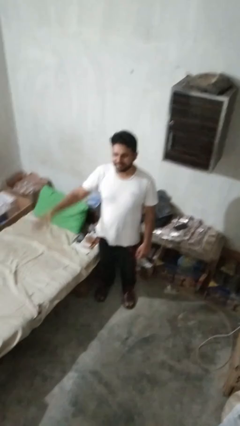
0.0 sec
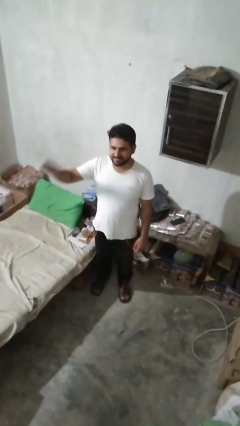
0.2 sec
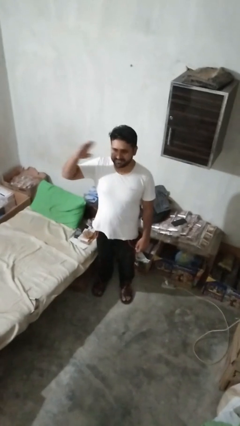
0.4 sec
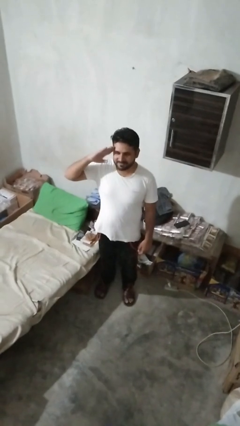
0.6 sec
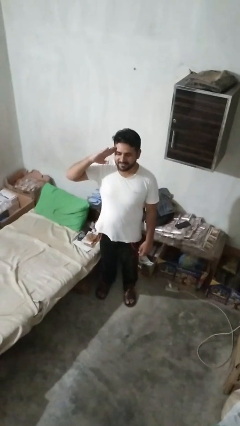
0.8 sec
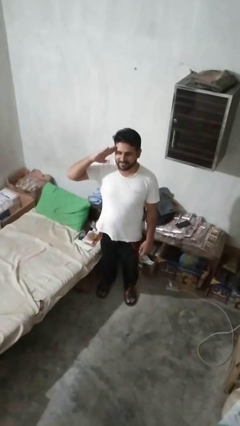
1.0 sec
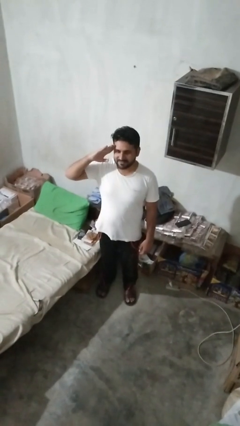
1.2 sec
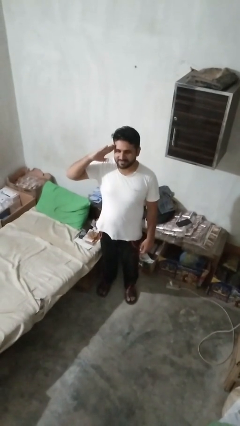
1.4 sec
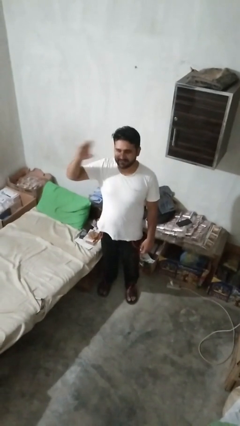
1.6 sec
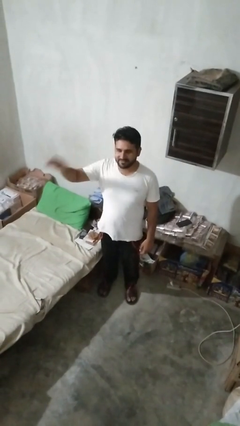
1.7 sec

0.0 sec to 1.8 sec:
person salutes

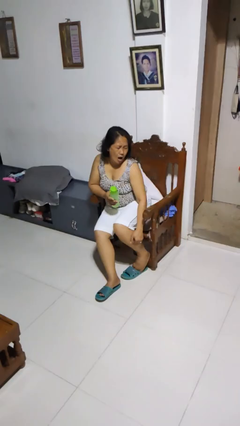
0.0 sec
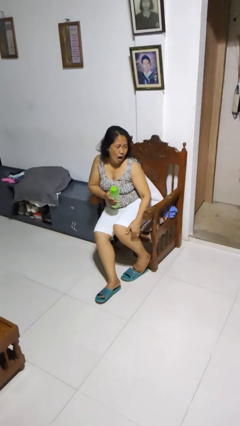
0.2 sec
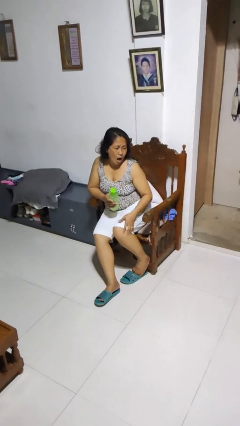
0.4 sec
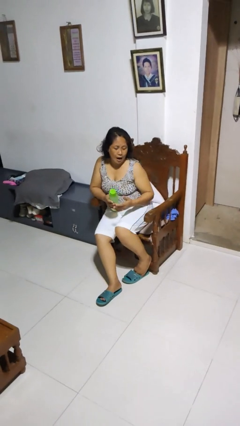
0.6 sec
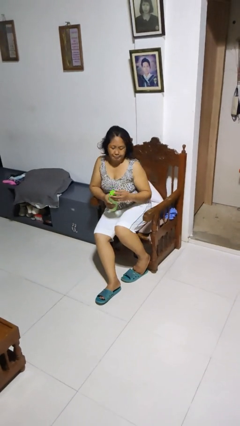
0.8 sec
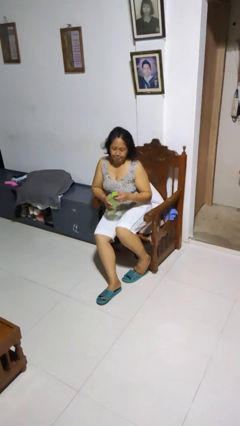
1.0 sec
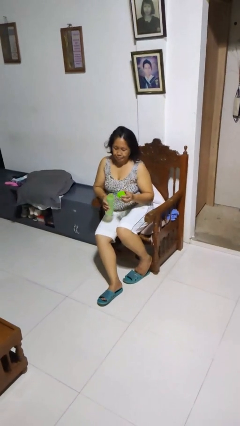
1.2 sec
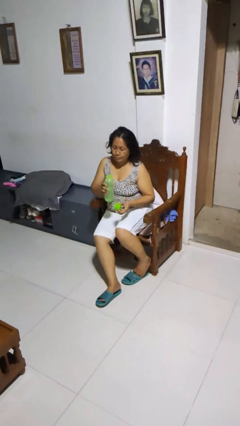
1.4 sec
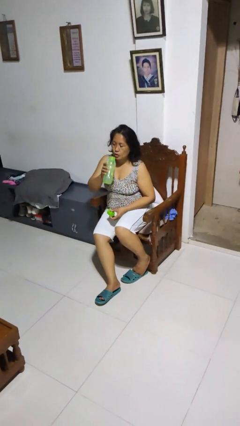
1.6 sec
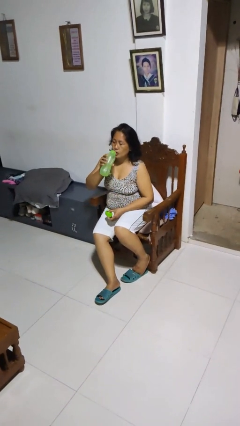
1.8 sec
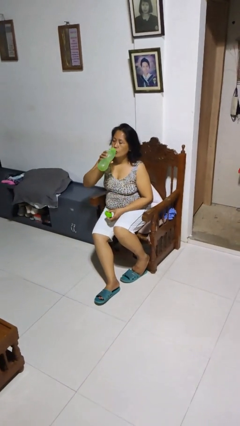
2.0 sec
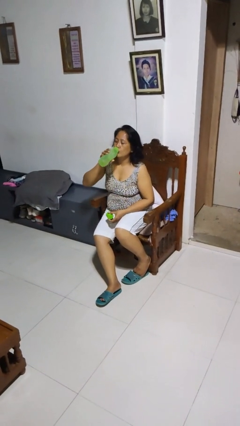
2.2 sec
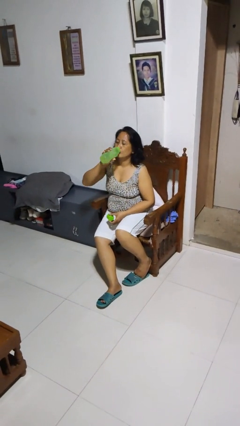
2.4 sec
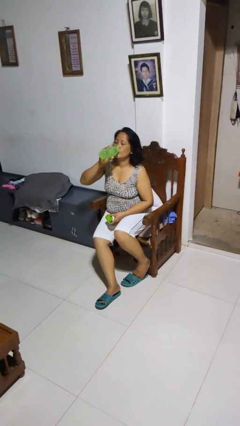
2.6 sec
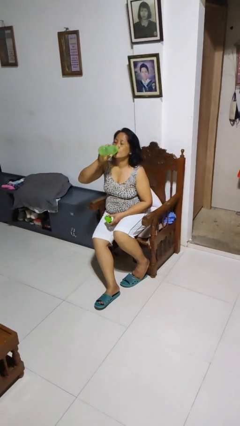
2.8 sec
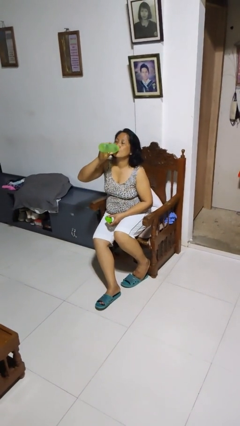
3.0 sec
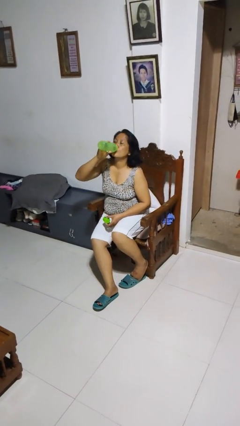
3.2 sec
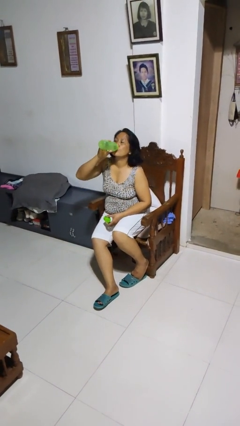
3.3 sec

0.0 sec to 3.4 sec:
person drinks from bottle

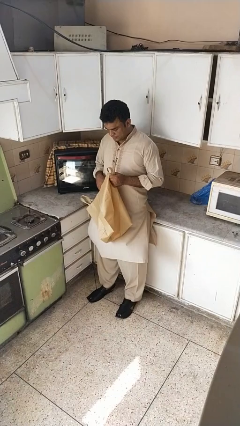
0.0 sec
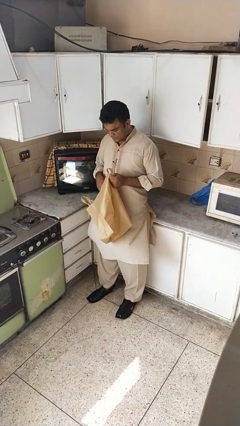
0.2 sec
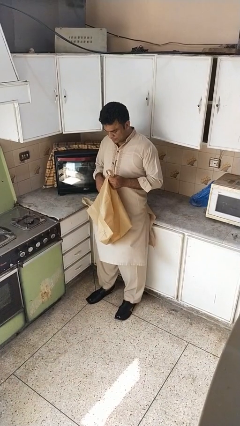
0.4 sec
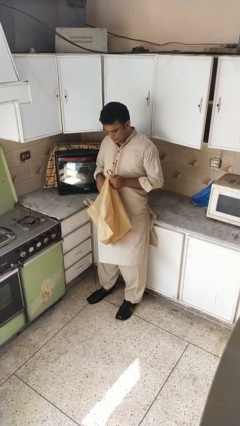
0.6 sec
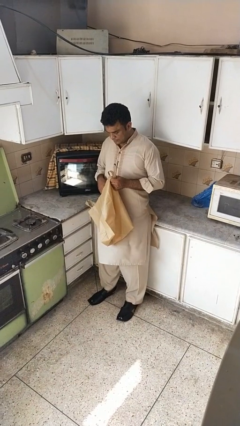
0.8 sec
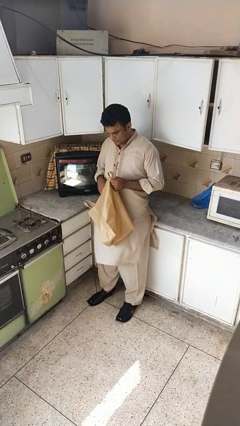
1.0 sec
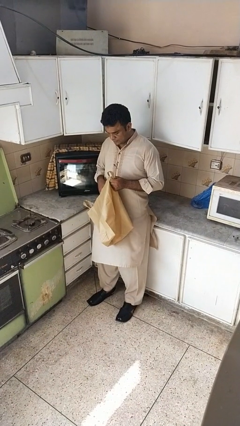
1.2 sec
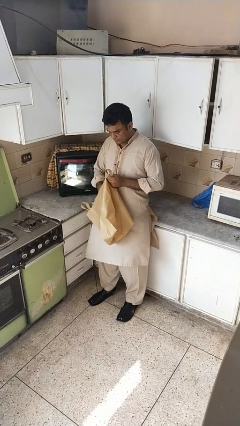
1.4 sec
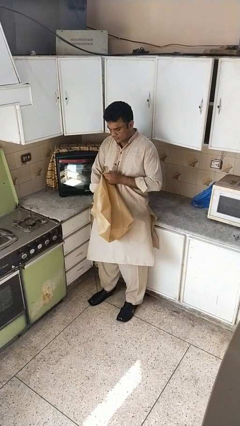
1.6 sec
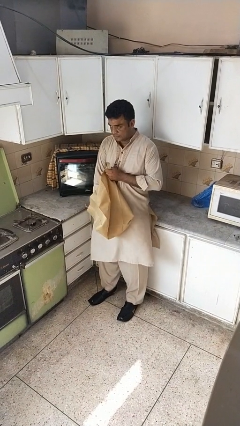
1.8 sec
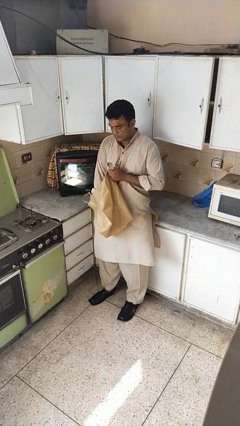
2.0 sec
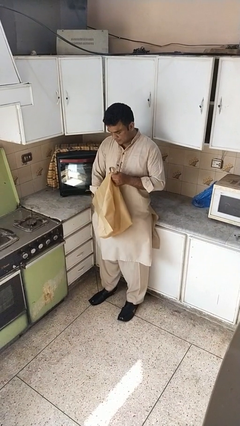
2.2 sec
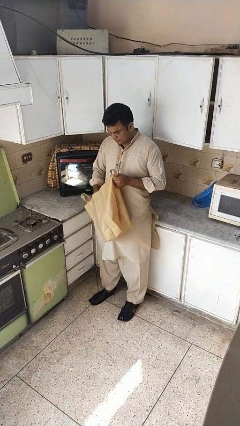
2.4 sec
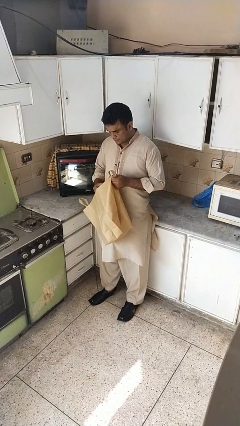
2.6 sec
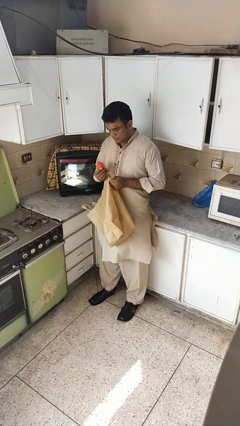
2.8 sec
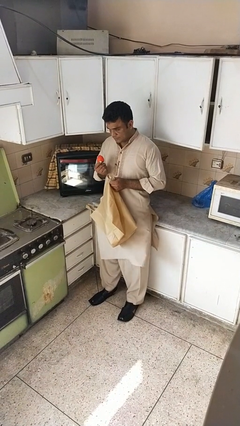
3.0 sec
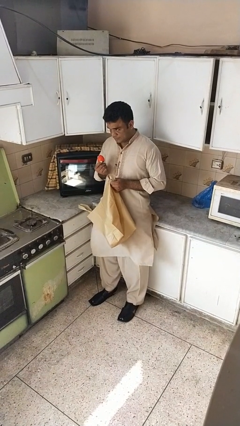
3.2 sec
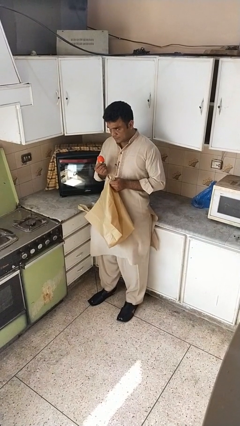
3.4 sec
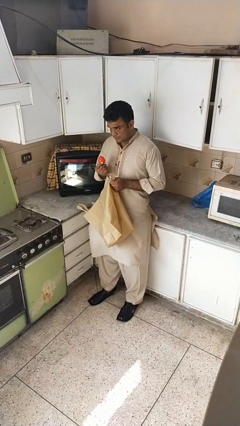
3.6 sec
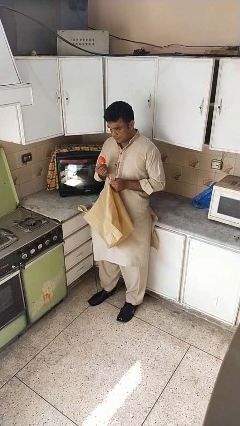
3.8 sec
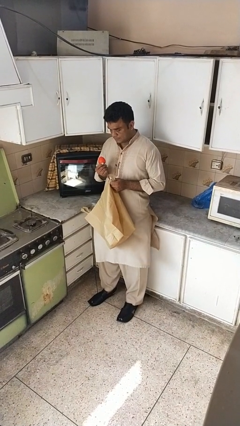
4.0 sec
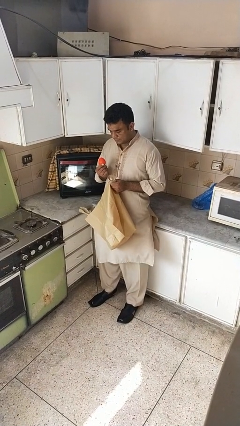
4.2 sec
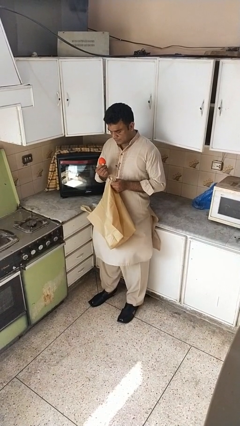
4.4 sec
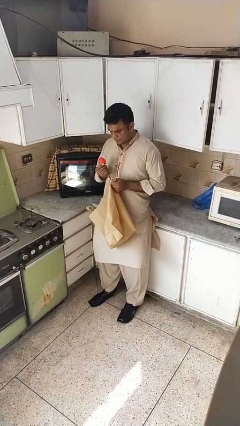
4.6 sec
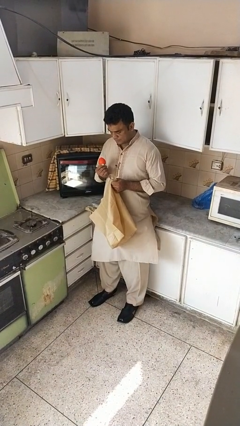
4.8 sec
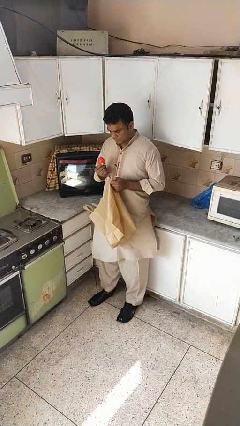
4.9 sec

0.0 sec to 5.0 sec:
person takes object from bag

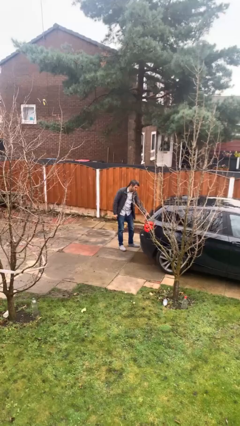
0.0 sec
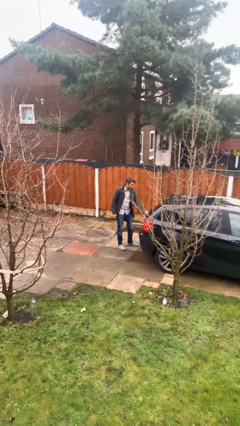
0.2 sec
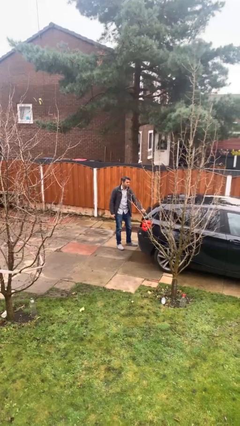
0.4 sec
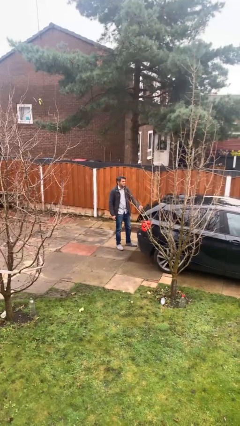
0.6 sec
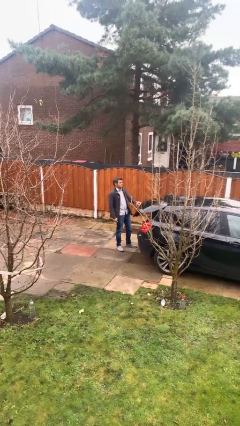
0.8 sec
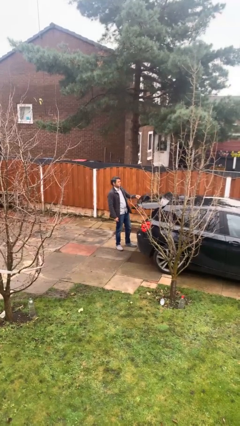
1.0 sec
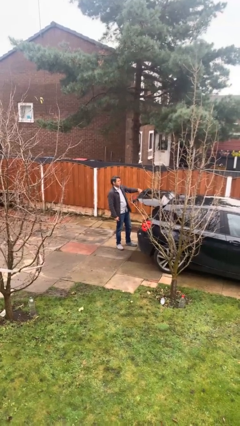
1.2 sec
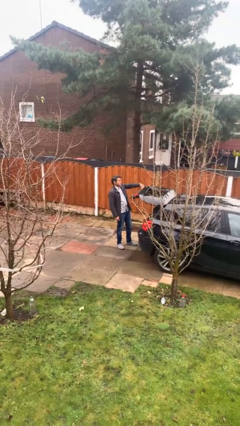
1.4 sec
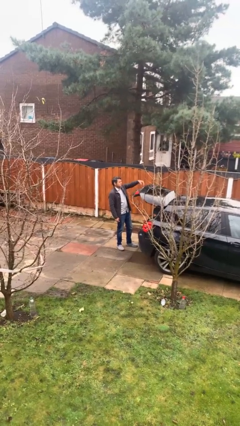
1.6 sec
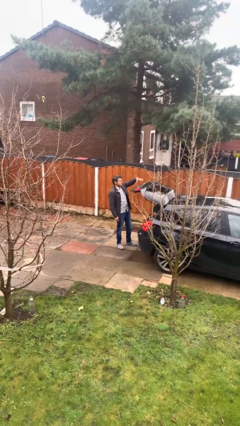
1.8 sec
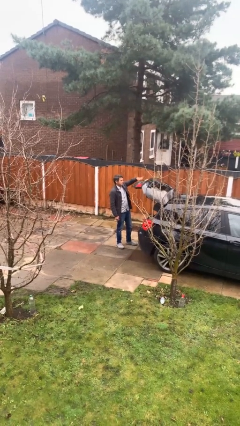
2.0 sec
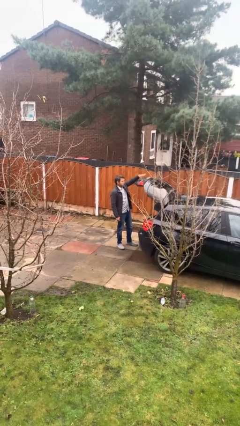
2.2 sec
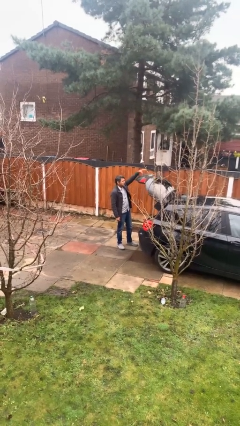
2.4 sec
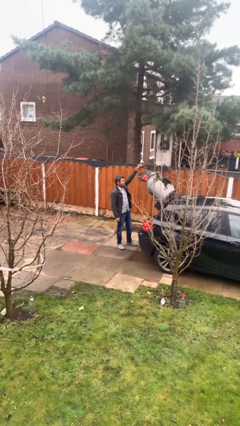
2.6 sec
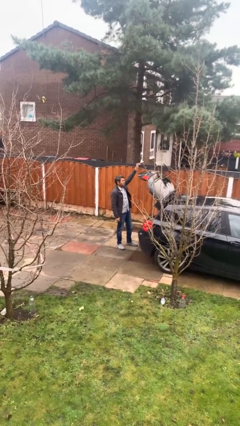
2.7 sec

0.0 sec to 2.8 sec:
person opens car trunk

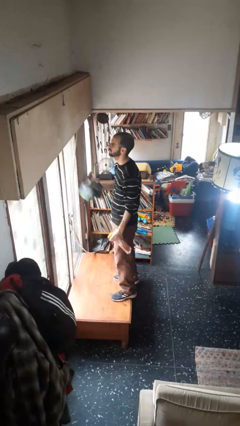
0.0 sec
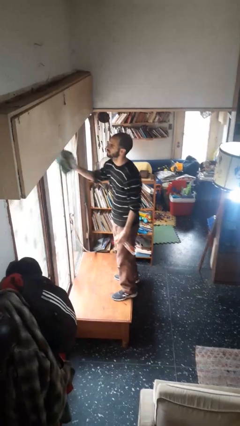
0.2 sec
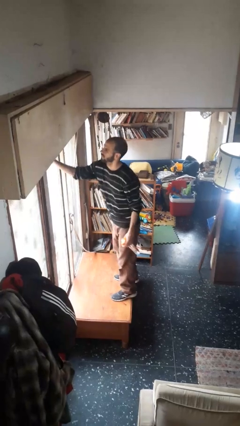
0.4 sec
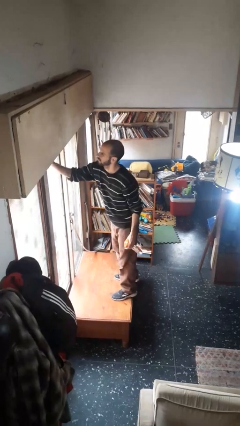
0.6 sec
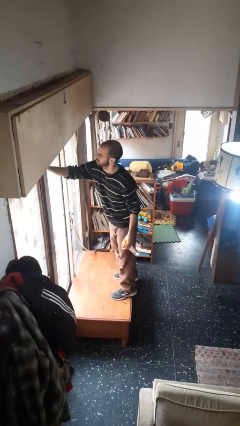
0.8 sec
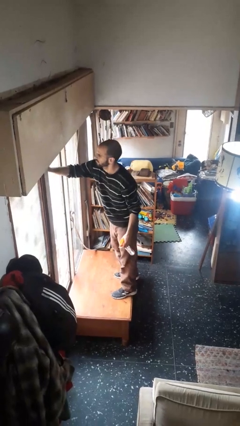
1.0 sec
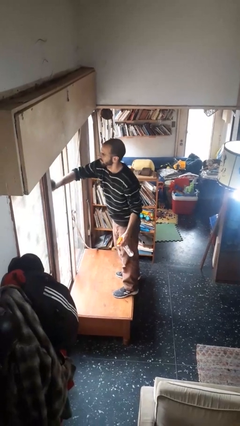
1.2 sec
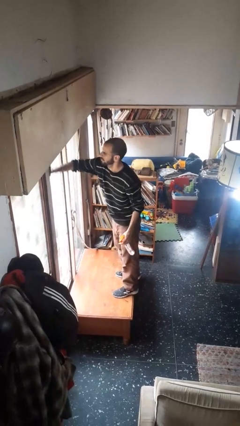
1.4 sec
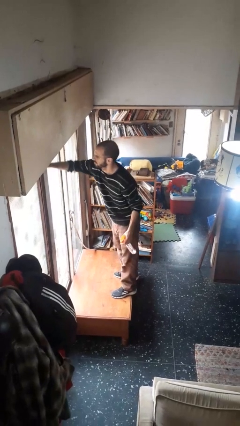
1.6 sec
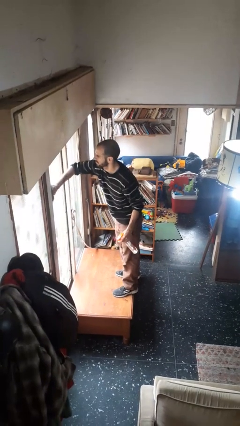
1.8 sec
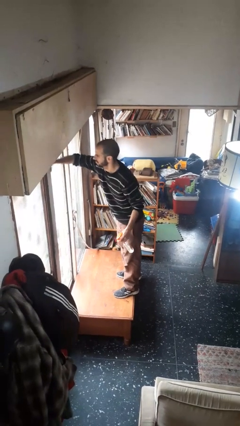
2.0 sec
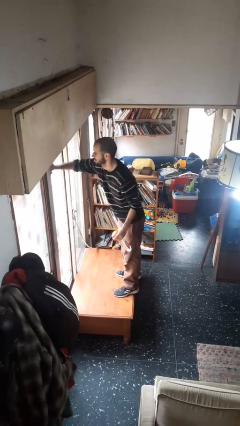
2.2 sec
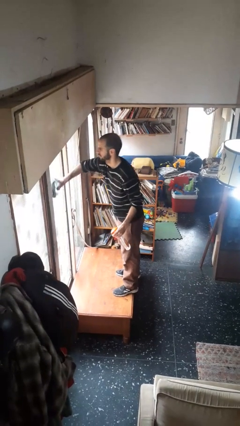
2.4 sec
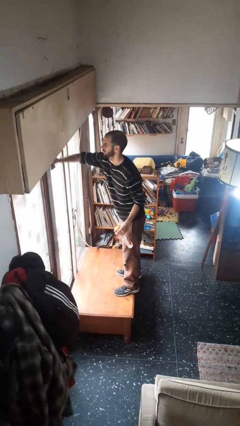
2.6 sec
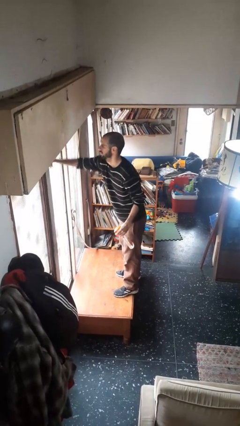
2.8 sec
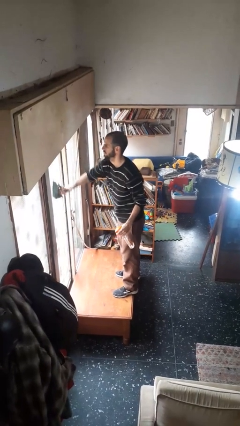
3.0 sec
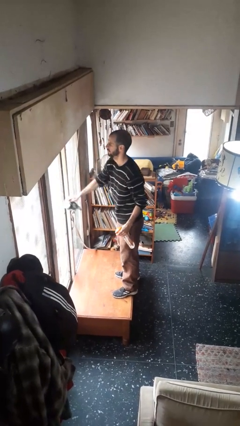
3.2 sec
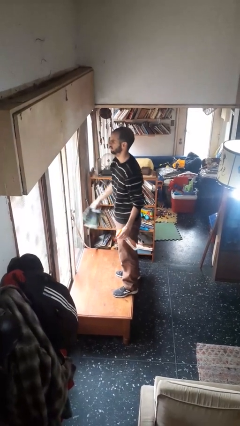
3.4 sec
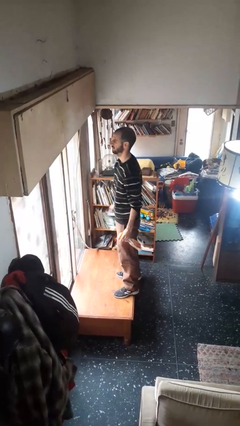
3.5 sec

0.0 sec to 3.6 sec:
person washes window

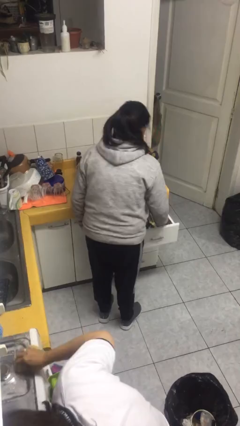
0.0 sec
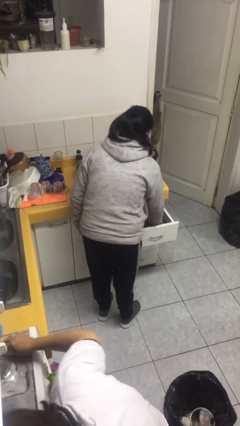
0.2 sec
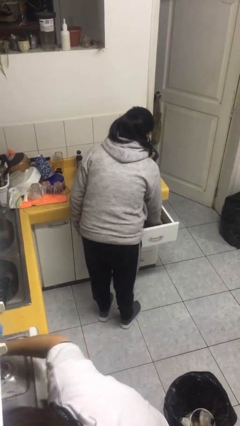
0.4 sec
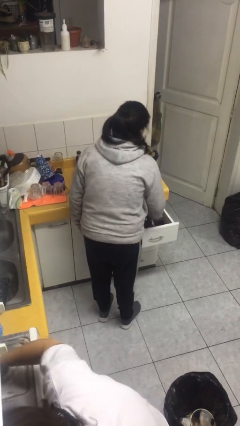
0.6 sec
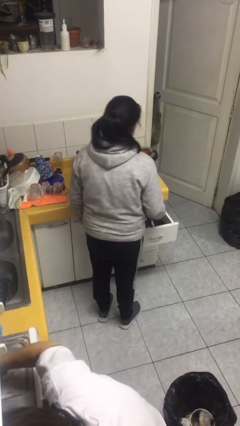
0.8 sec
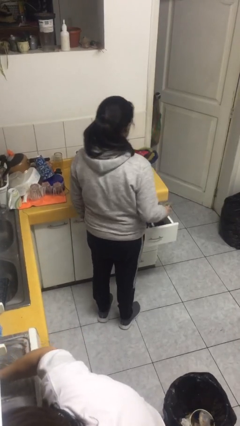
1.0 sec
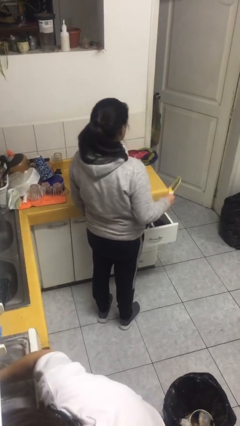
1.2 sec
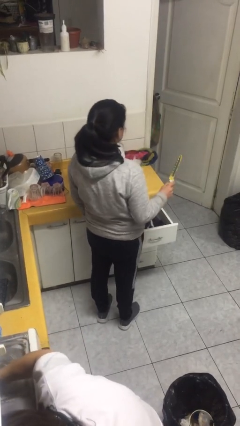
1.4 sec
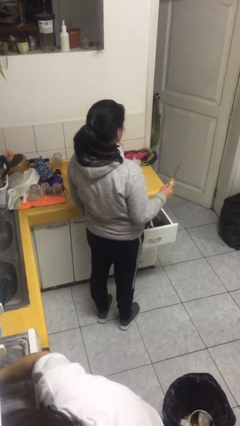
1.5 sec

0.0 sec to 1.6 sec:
person takes object from kitchen drawer
